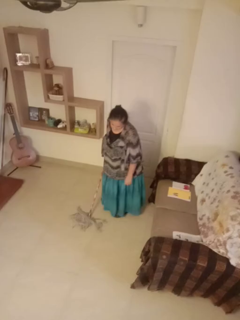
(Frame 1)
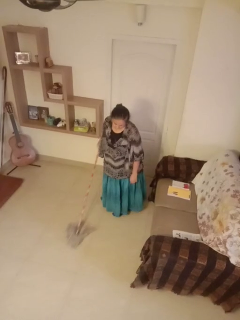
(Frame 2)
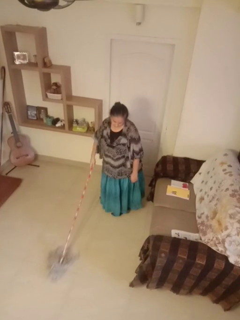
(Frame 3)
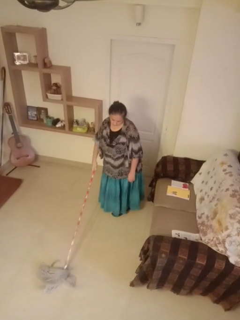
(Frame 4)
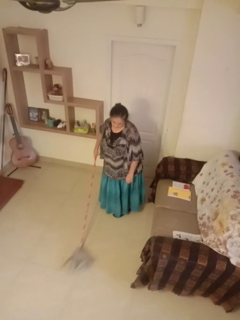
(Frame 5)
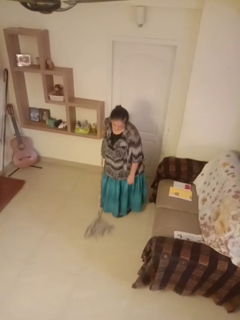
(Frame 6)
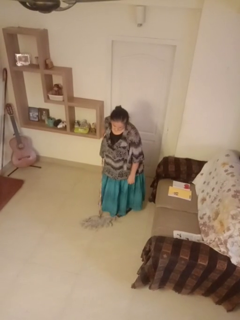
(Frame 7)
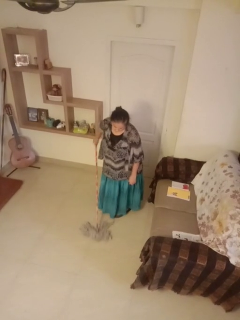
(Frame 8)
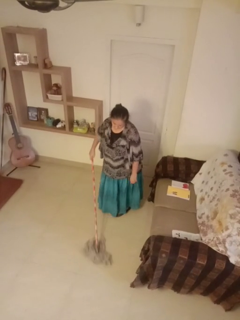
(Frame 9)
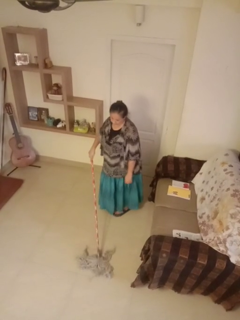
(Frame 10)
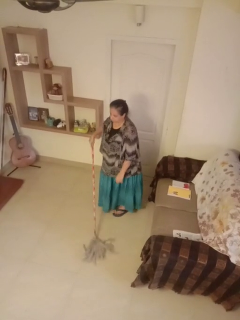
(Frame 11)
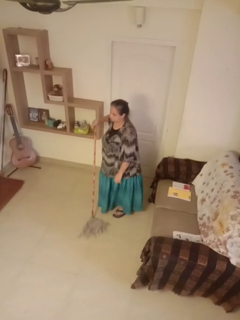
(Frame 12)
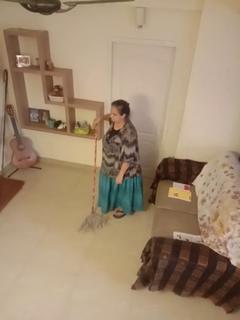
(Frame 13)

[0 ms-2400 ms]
person mops

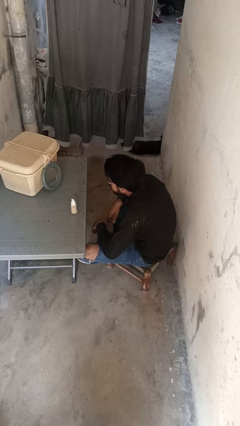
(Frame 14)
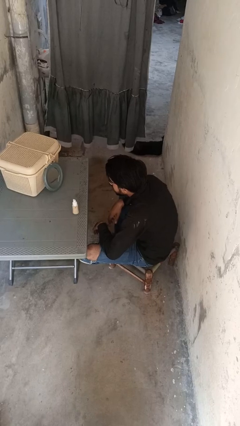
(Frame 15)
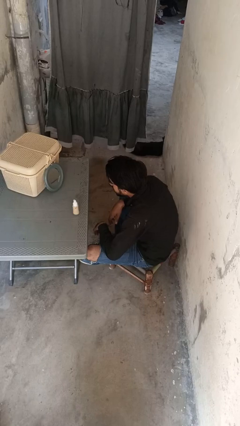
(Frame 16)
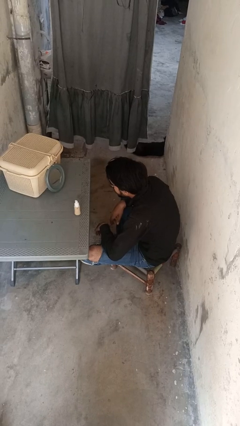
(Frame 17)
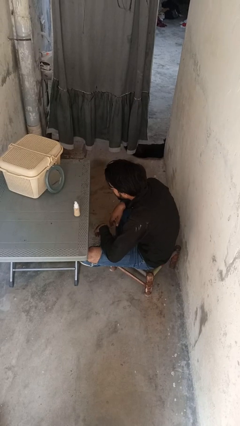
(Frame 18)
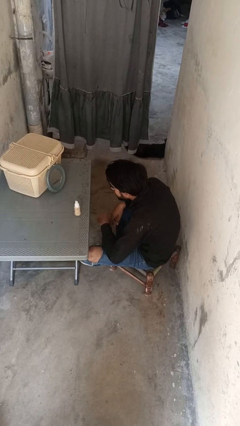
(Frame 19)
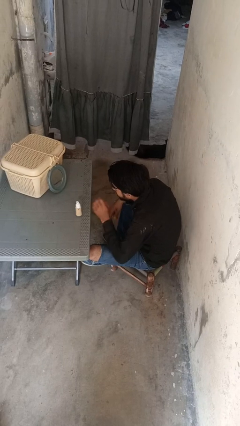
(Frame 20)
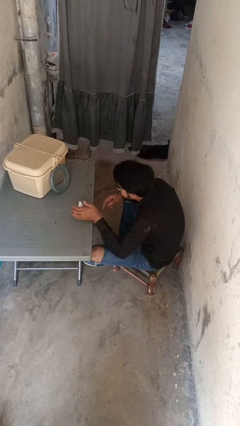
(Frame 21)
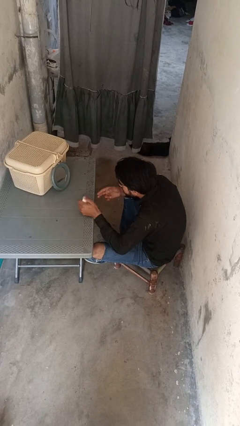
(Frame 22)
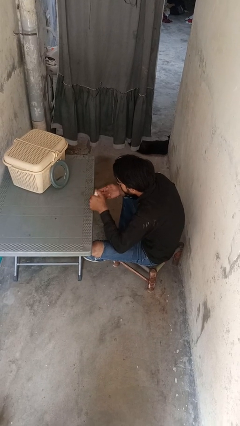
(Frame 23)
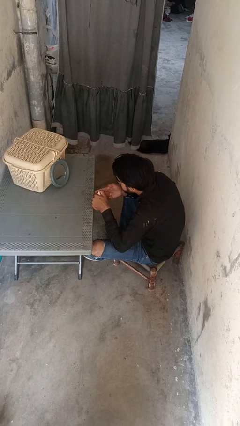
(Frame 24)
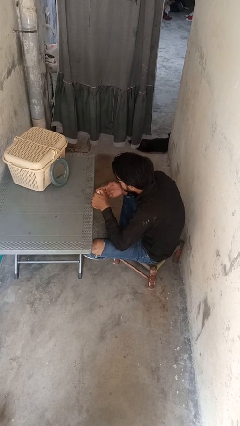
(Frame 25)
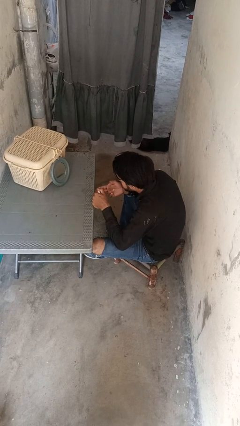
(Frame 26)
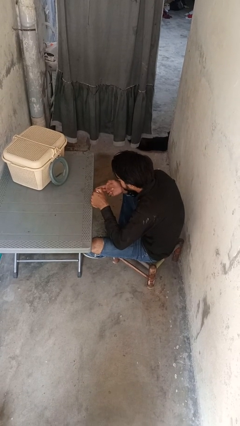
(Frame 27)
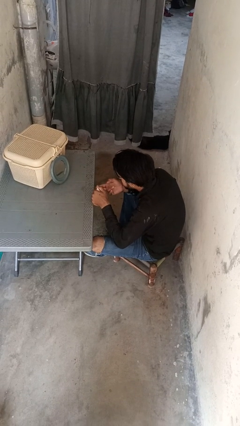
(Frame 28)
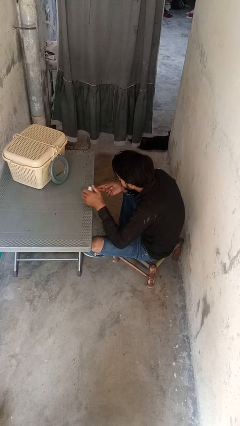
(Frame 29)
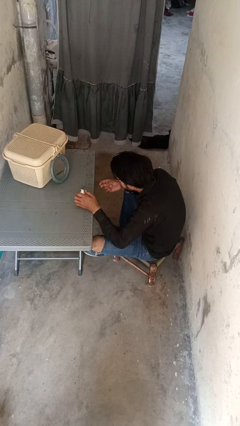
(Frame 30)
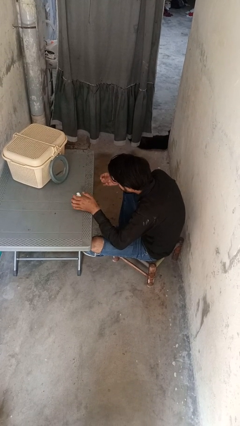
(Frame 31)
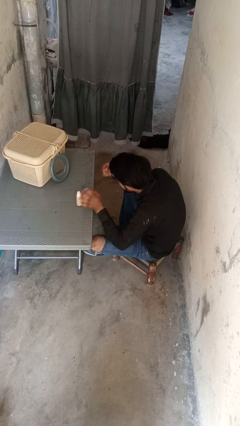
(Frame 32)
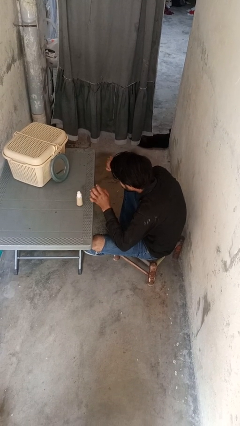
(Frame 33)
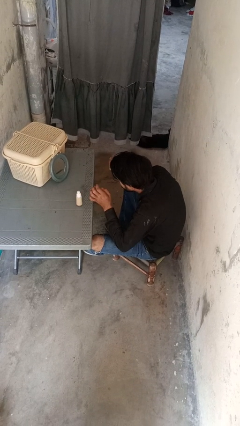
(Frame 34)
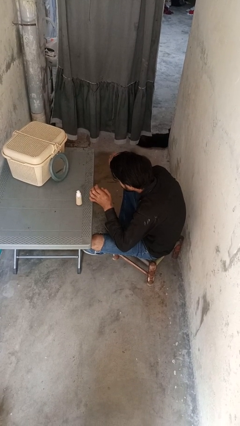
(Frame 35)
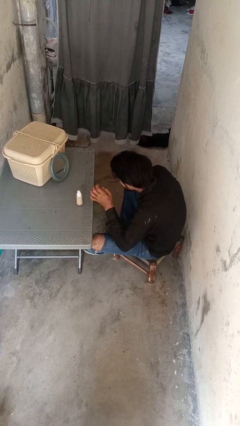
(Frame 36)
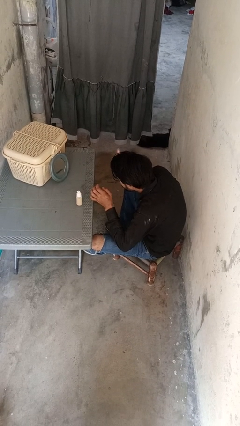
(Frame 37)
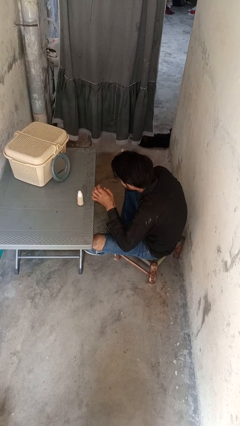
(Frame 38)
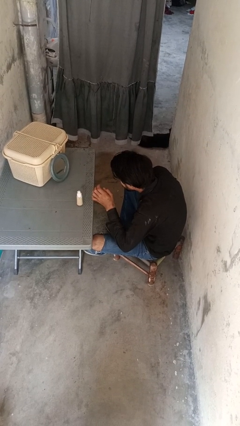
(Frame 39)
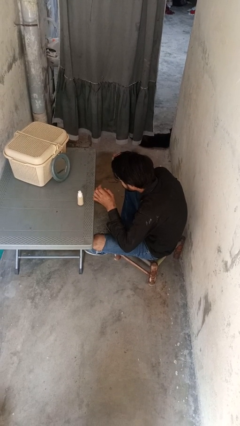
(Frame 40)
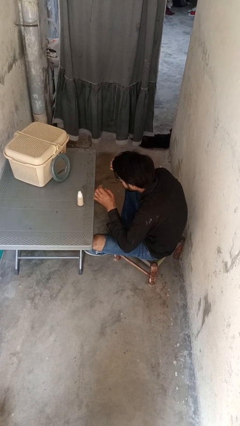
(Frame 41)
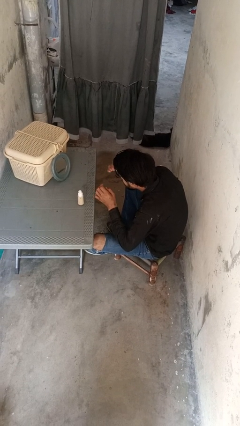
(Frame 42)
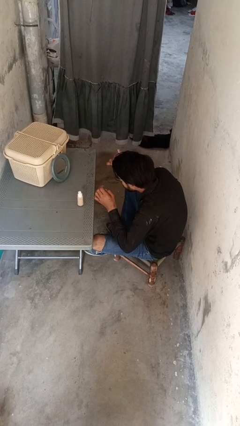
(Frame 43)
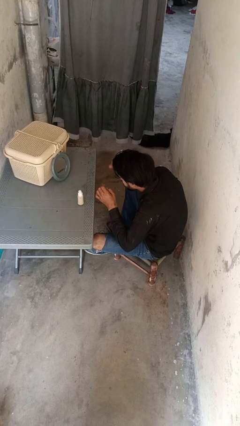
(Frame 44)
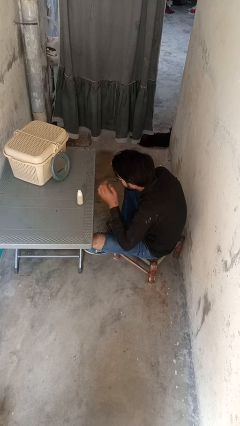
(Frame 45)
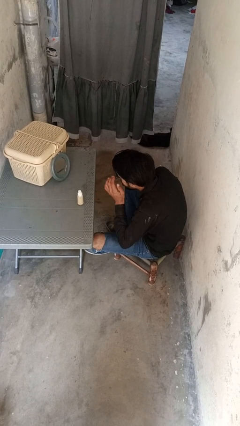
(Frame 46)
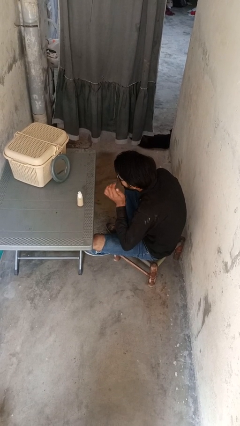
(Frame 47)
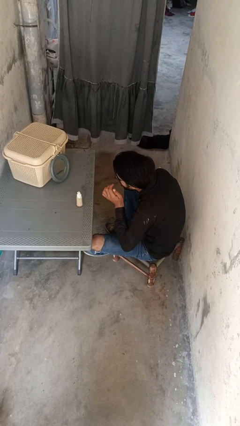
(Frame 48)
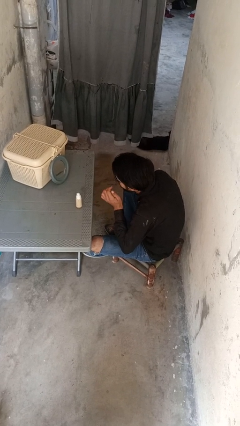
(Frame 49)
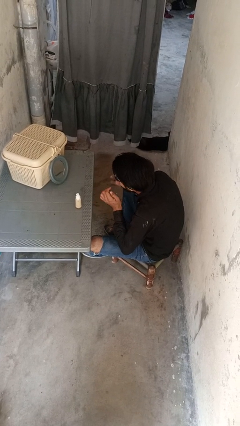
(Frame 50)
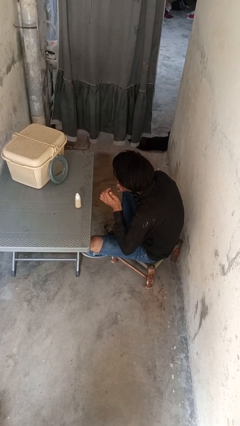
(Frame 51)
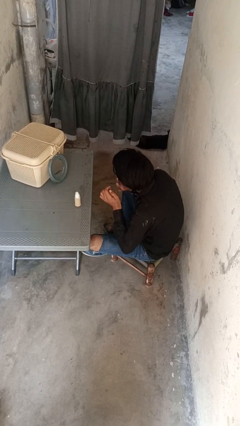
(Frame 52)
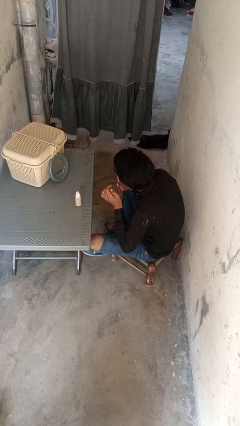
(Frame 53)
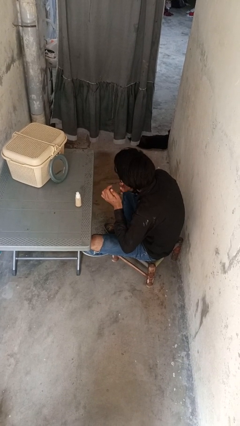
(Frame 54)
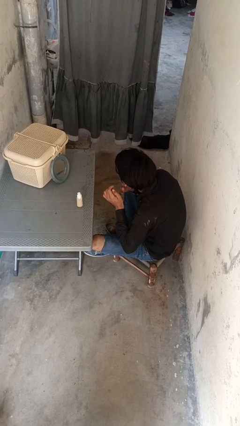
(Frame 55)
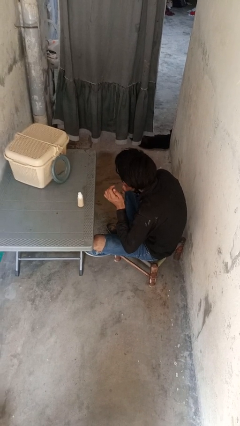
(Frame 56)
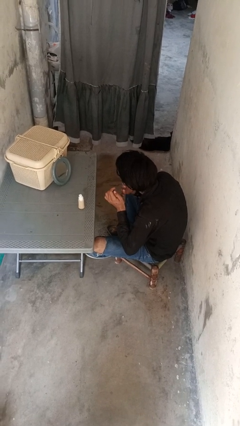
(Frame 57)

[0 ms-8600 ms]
person applies foundation makeup

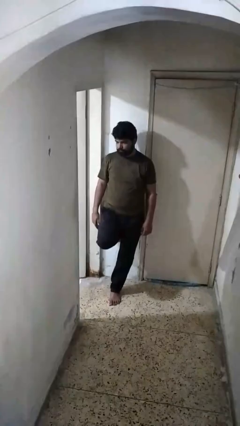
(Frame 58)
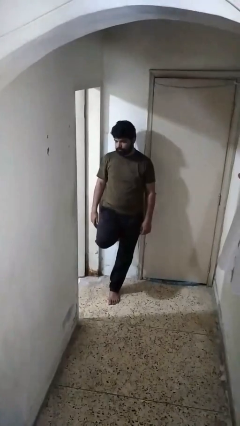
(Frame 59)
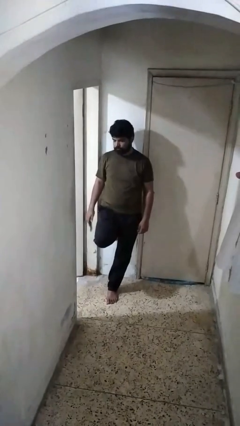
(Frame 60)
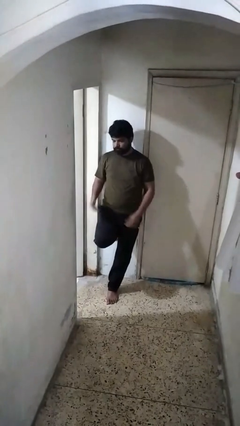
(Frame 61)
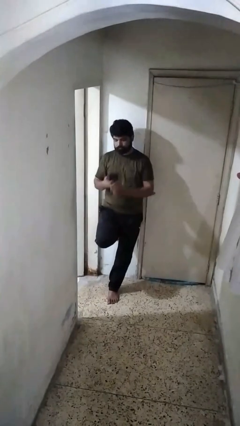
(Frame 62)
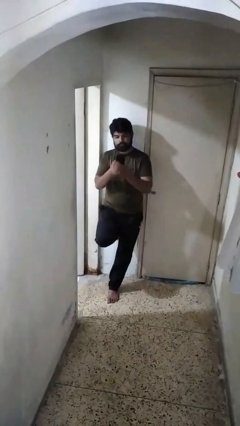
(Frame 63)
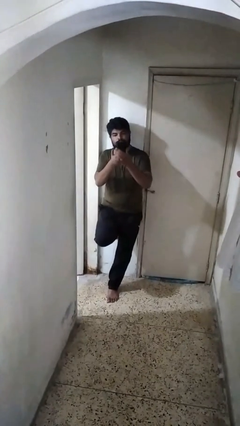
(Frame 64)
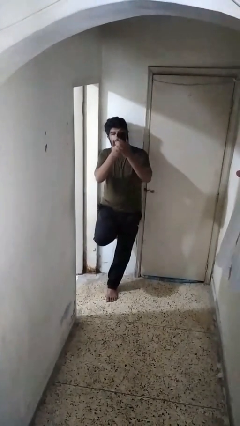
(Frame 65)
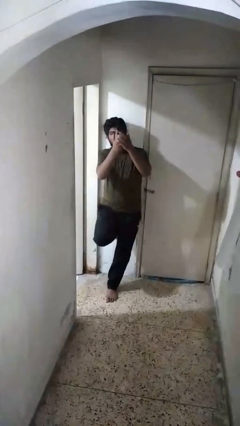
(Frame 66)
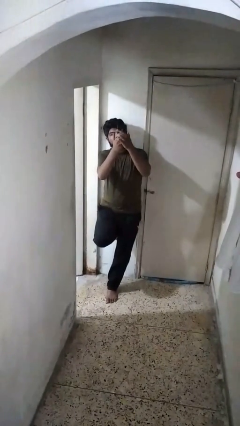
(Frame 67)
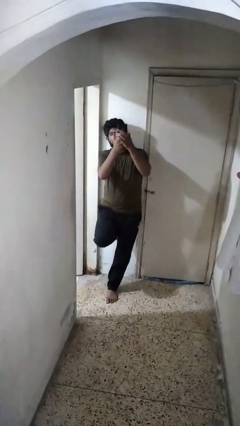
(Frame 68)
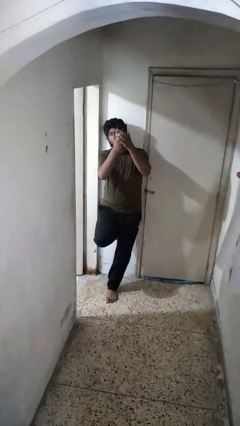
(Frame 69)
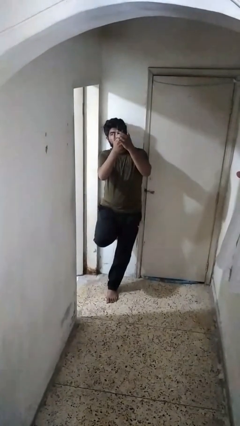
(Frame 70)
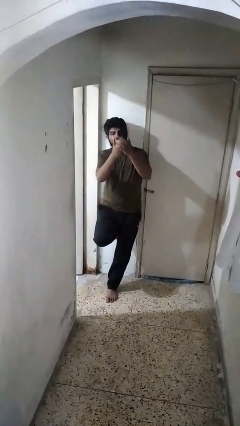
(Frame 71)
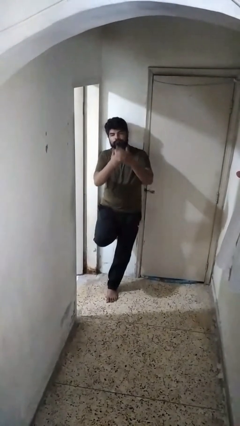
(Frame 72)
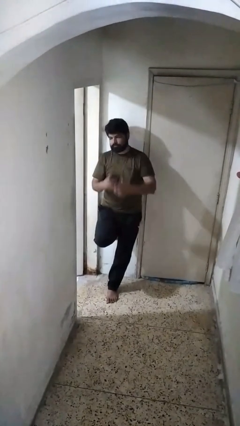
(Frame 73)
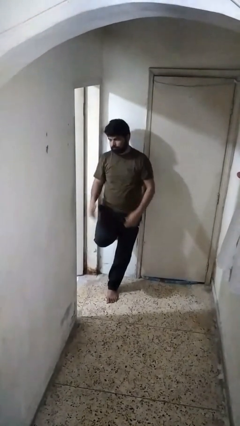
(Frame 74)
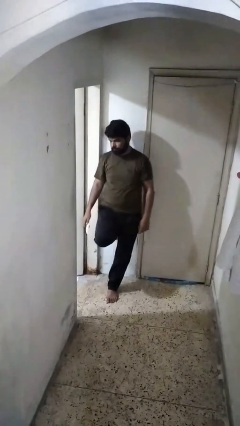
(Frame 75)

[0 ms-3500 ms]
person takes selfie

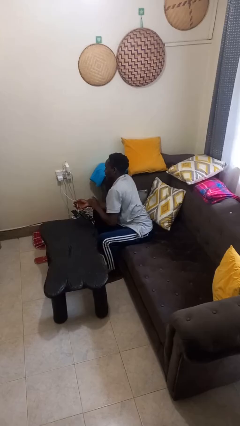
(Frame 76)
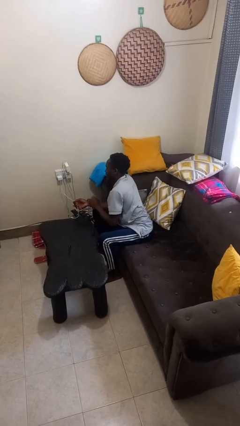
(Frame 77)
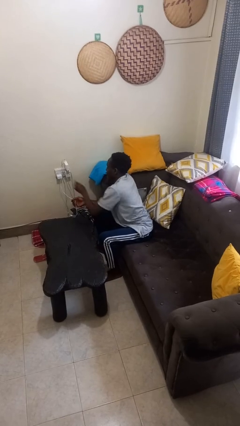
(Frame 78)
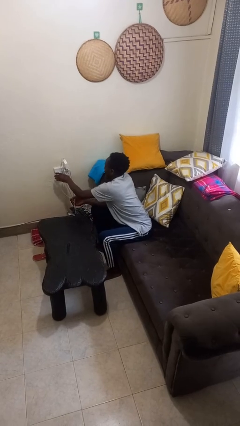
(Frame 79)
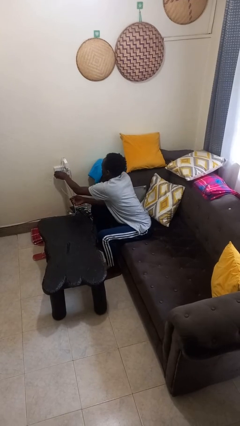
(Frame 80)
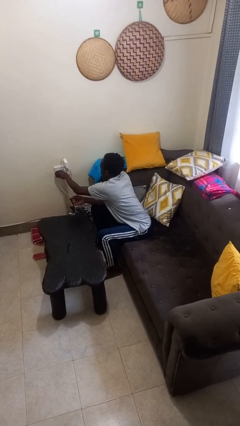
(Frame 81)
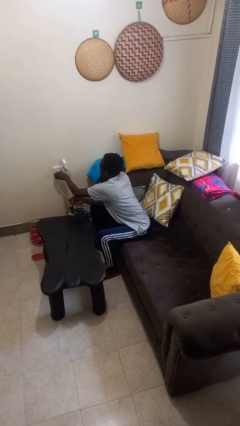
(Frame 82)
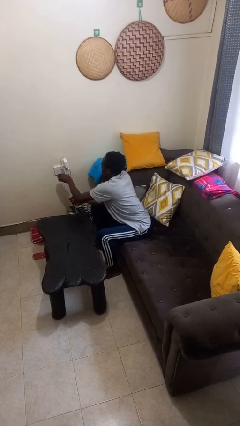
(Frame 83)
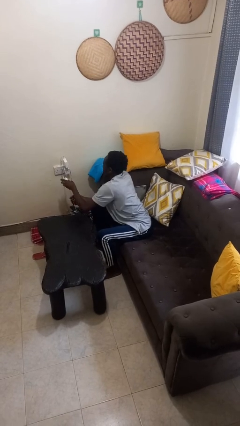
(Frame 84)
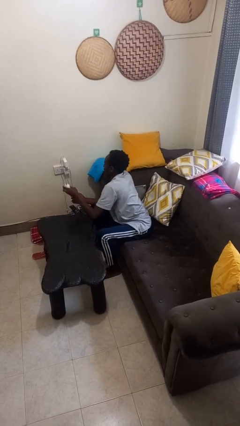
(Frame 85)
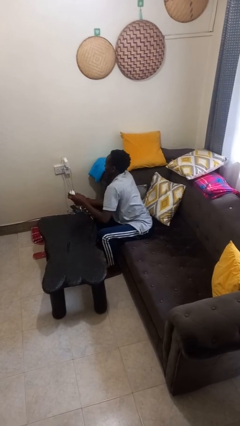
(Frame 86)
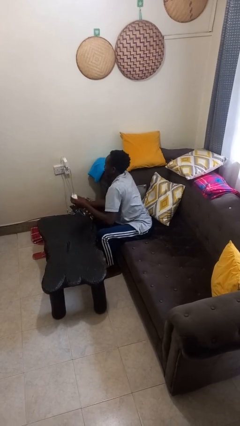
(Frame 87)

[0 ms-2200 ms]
person unplugs from electrical socket

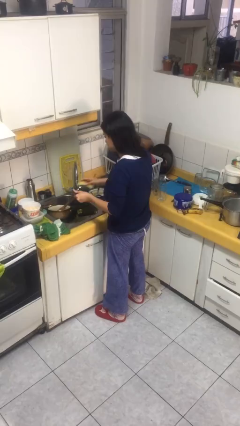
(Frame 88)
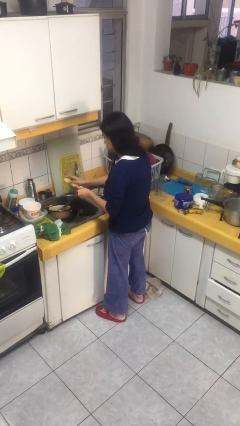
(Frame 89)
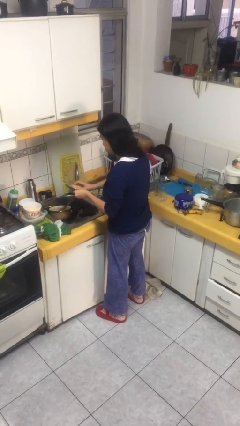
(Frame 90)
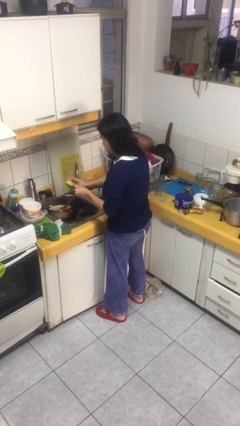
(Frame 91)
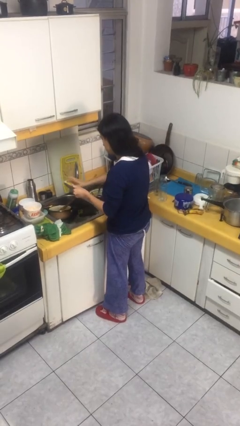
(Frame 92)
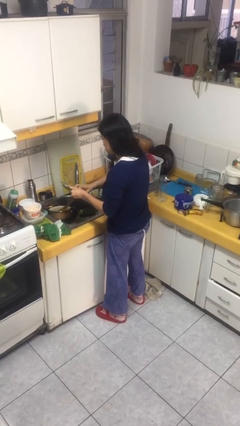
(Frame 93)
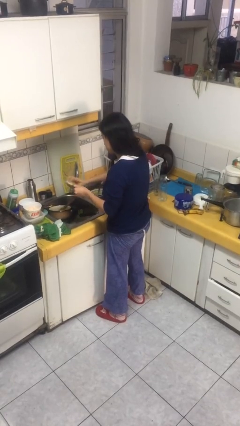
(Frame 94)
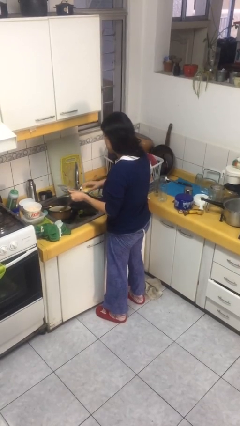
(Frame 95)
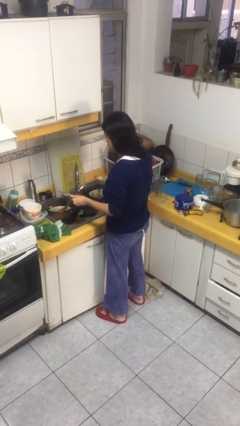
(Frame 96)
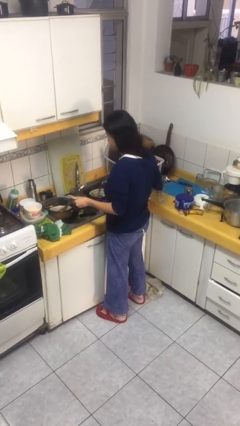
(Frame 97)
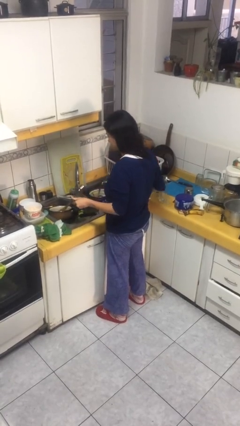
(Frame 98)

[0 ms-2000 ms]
person washes dish
